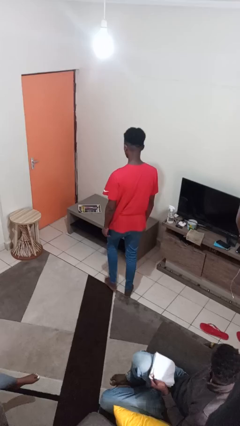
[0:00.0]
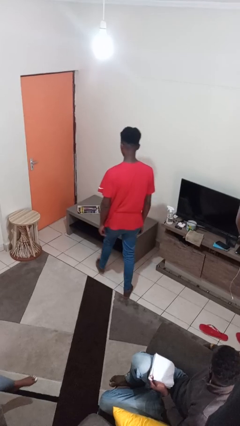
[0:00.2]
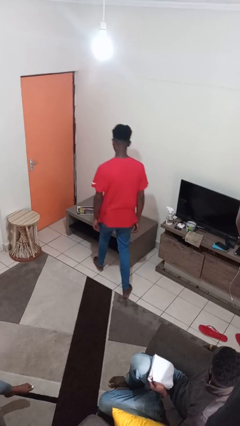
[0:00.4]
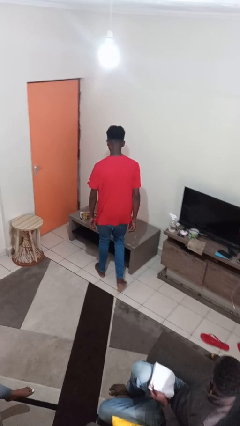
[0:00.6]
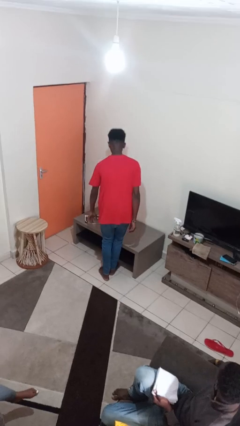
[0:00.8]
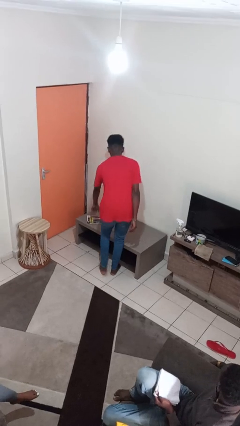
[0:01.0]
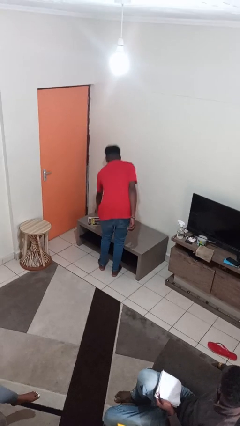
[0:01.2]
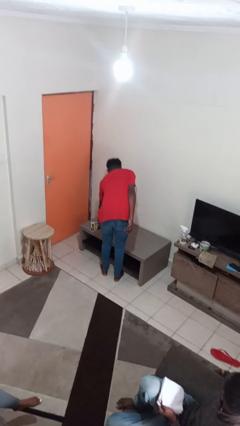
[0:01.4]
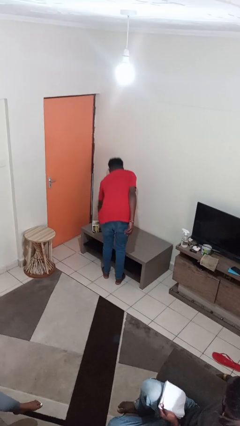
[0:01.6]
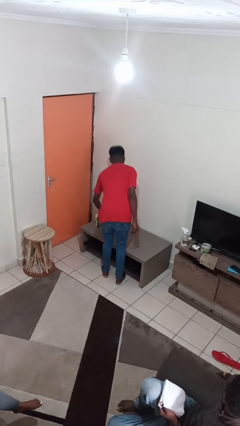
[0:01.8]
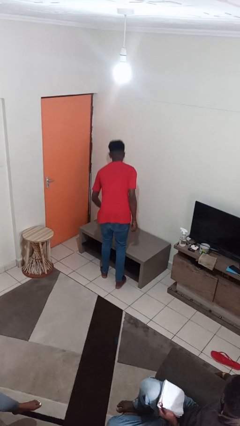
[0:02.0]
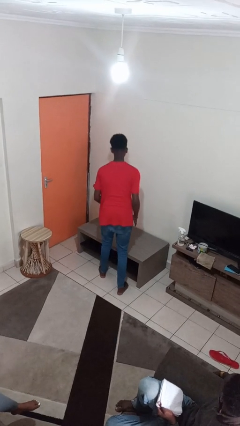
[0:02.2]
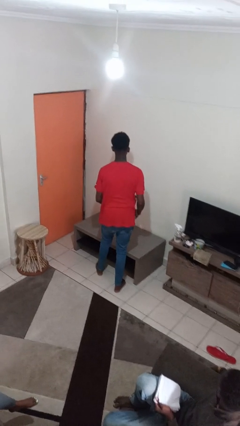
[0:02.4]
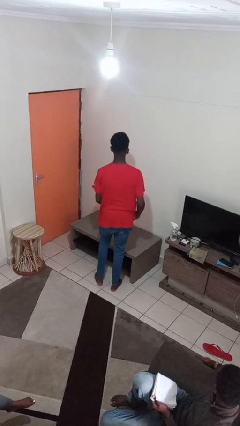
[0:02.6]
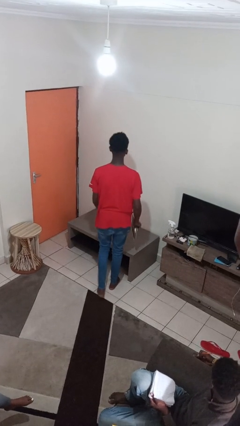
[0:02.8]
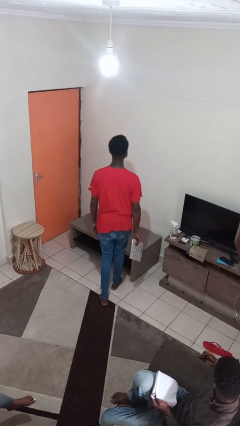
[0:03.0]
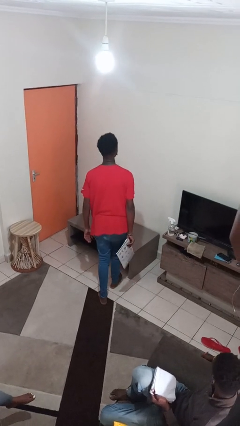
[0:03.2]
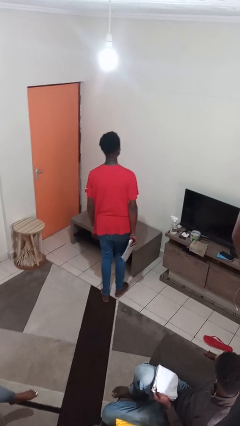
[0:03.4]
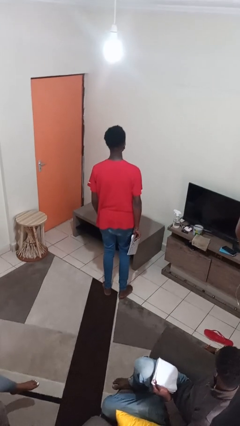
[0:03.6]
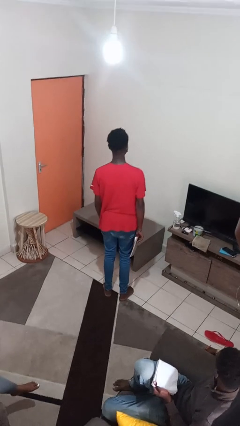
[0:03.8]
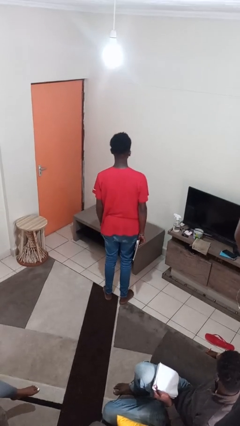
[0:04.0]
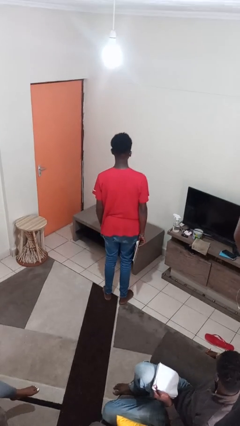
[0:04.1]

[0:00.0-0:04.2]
person picks up object from table

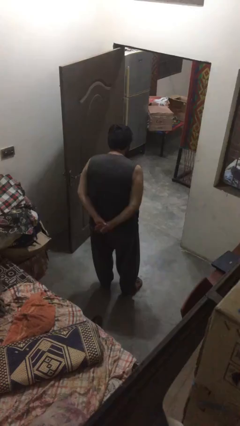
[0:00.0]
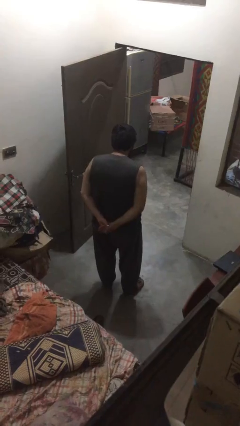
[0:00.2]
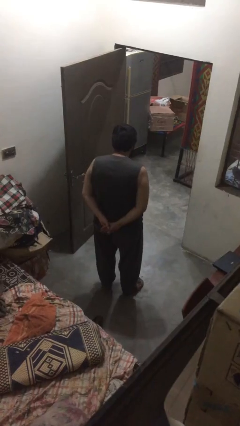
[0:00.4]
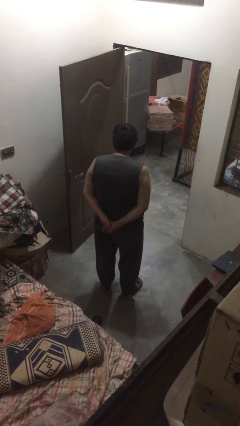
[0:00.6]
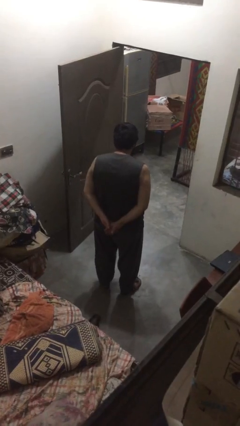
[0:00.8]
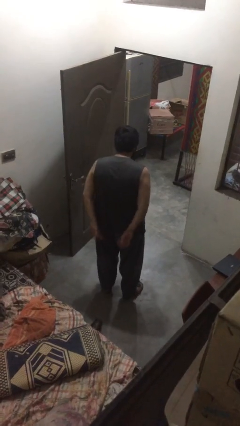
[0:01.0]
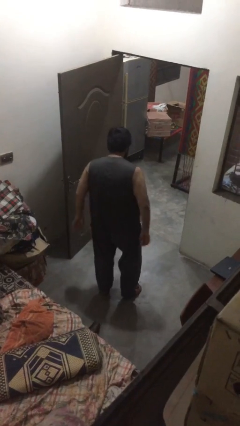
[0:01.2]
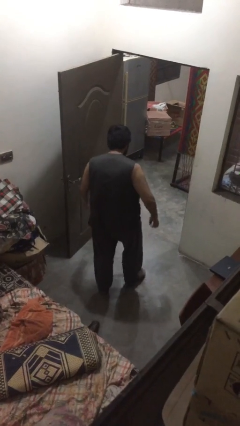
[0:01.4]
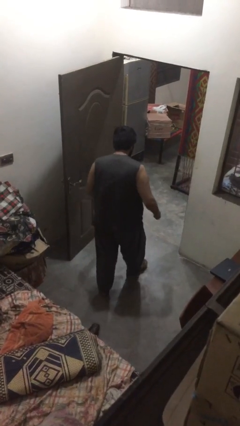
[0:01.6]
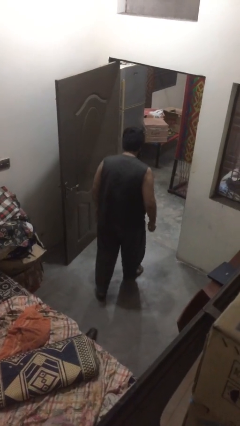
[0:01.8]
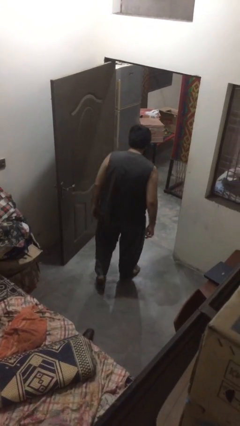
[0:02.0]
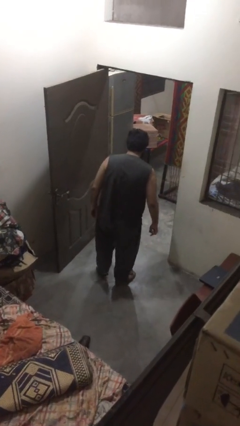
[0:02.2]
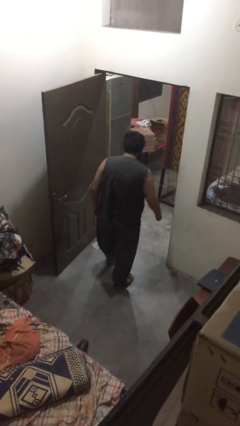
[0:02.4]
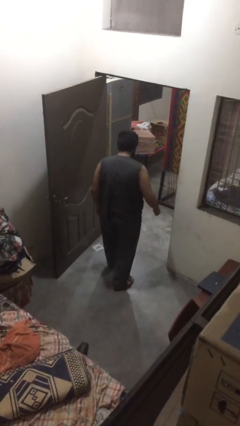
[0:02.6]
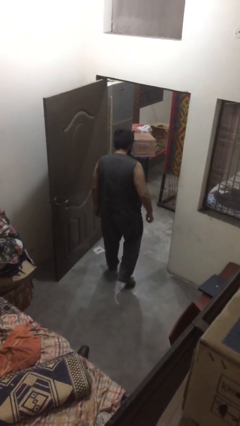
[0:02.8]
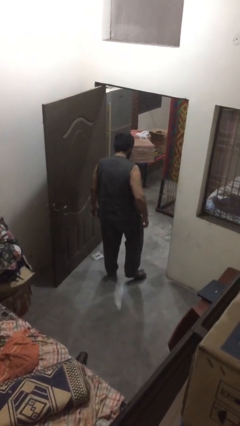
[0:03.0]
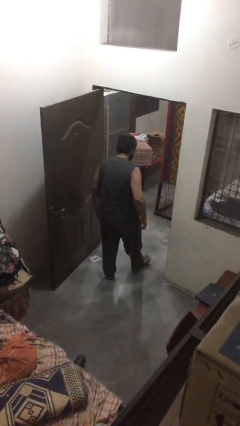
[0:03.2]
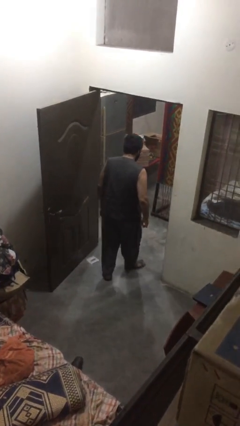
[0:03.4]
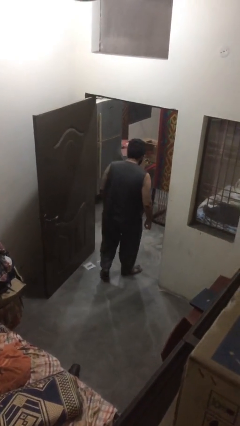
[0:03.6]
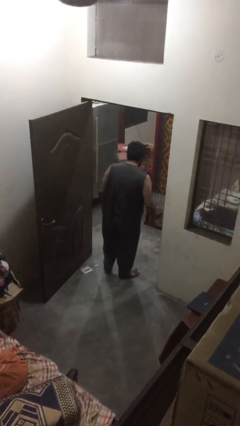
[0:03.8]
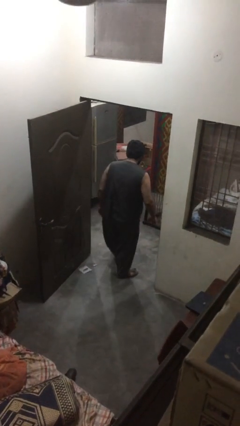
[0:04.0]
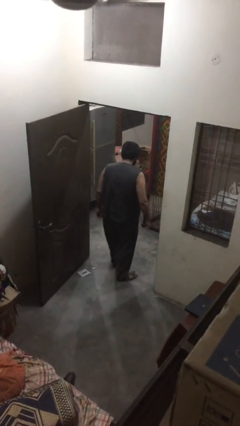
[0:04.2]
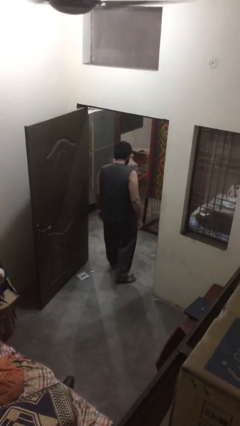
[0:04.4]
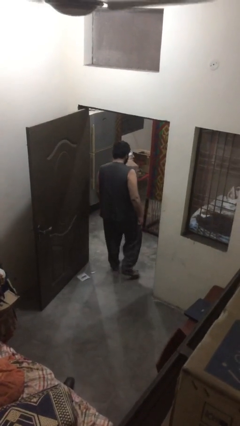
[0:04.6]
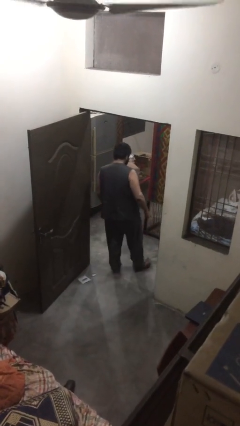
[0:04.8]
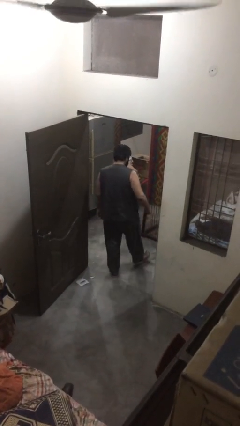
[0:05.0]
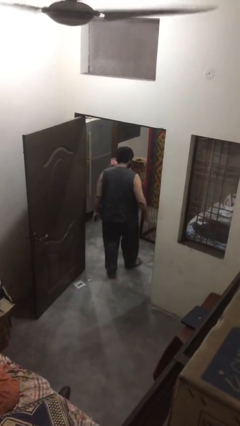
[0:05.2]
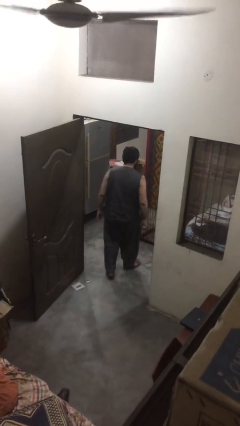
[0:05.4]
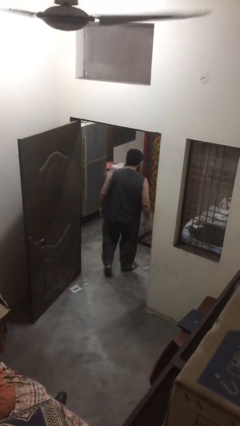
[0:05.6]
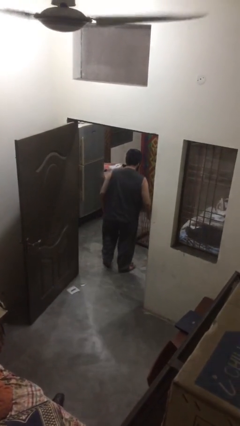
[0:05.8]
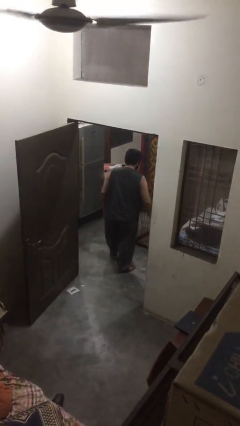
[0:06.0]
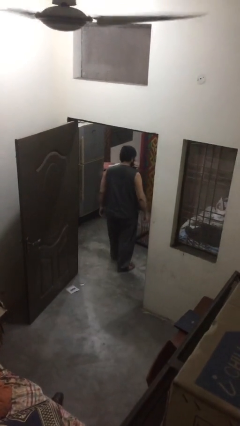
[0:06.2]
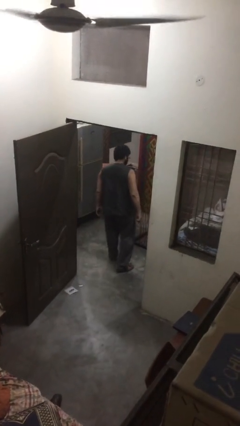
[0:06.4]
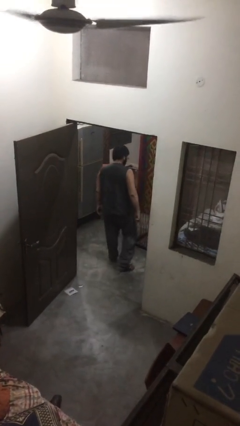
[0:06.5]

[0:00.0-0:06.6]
person exits scene through structure

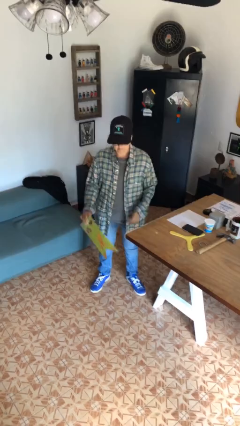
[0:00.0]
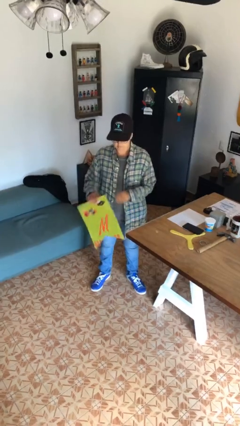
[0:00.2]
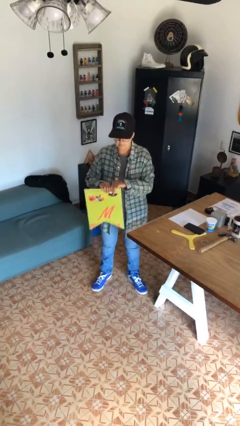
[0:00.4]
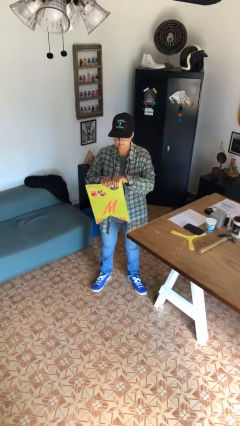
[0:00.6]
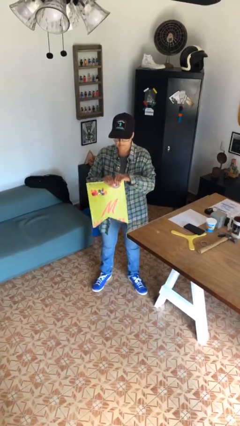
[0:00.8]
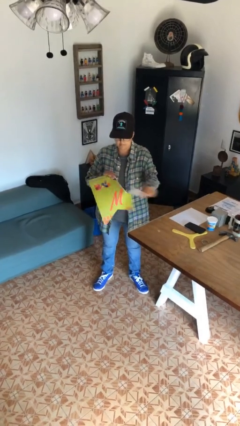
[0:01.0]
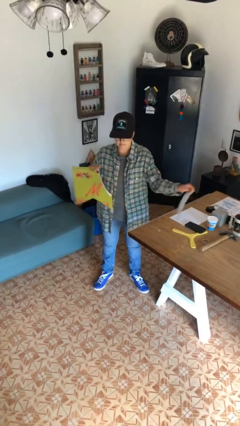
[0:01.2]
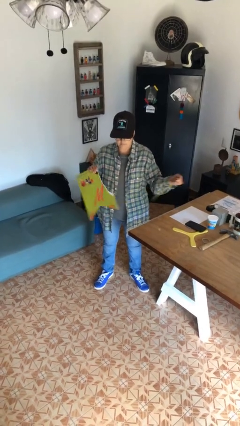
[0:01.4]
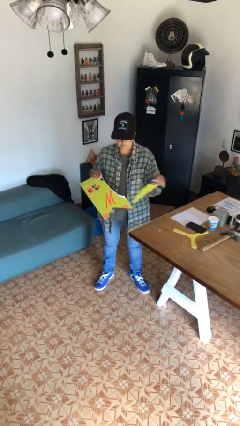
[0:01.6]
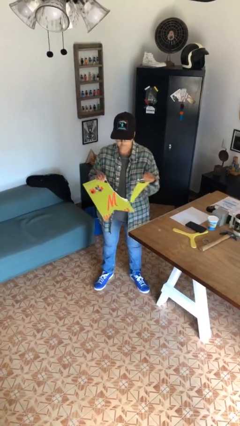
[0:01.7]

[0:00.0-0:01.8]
person tears paper

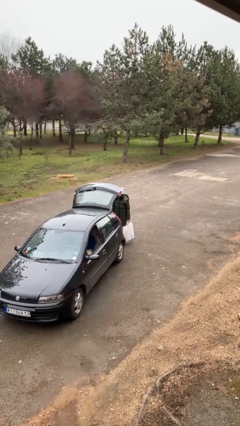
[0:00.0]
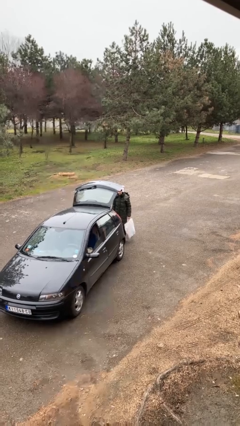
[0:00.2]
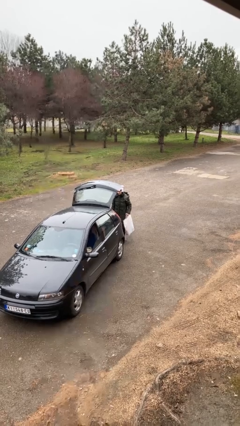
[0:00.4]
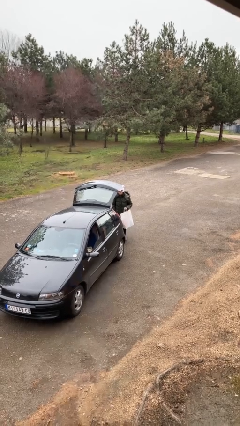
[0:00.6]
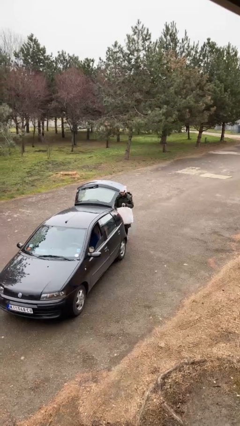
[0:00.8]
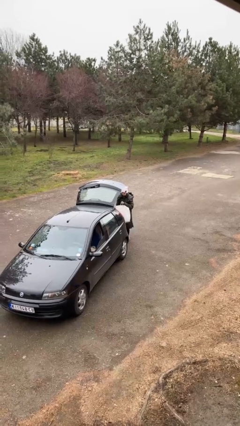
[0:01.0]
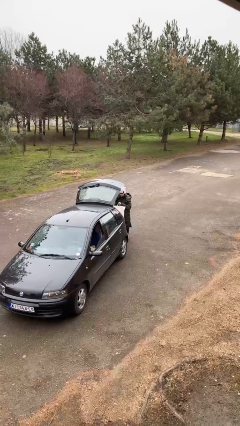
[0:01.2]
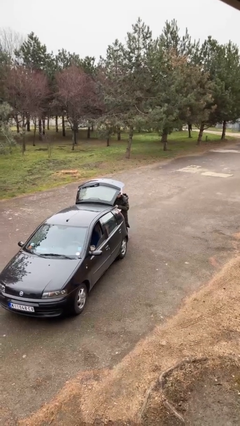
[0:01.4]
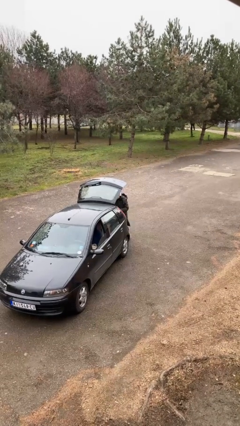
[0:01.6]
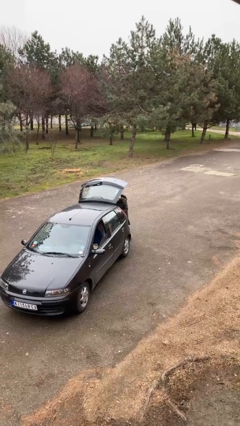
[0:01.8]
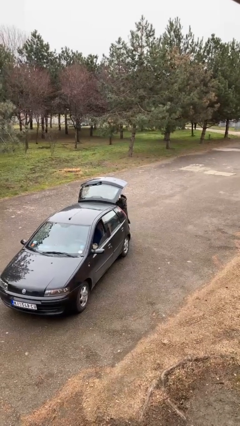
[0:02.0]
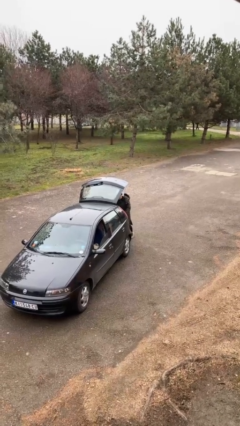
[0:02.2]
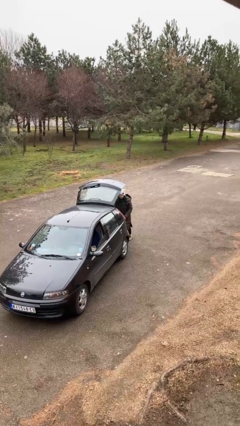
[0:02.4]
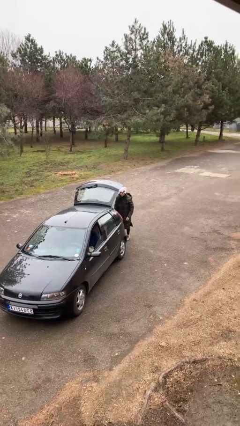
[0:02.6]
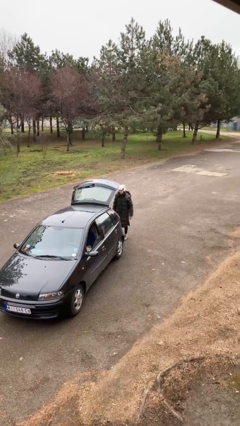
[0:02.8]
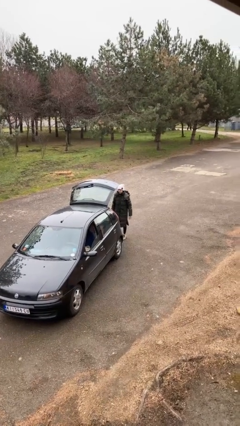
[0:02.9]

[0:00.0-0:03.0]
person loads car

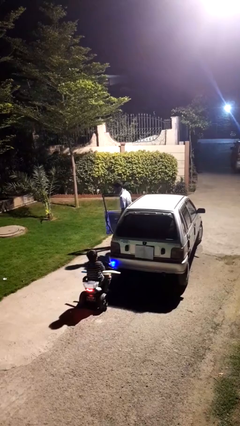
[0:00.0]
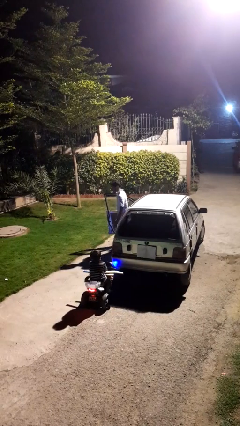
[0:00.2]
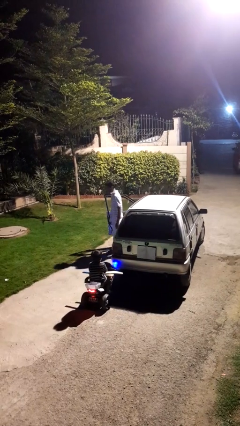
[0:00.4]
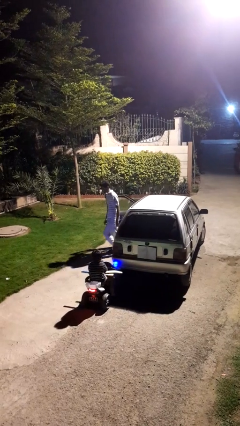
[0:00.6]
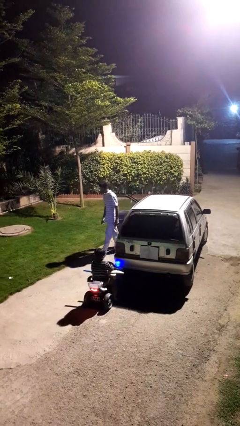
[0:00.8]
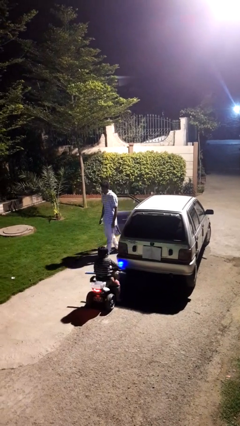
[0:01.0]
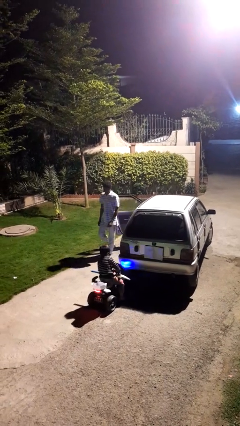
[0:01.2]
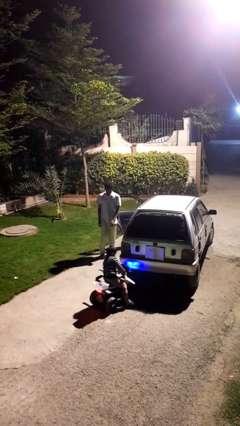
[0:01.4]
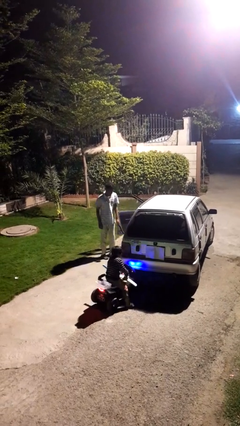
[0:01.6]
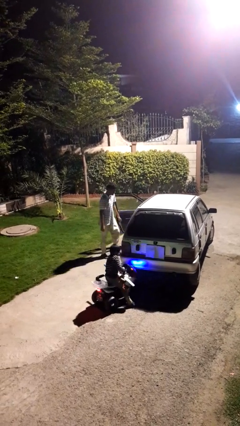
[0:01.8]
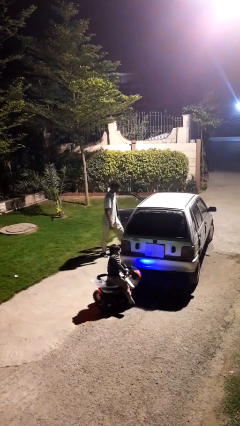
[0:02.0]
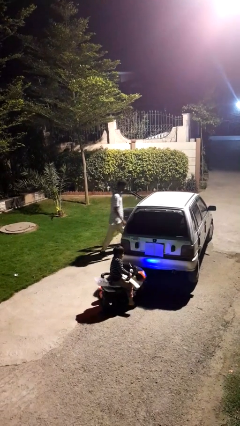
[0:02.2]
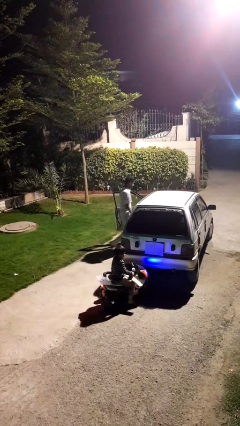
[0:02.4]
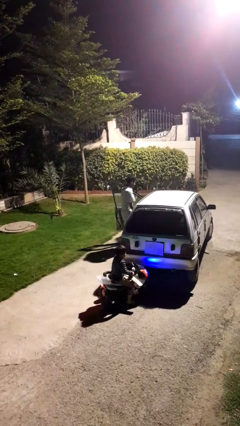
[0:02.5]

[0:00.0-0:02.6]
person exits car
